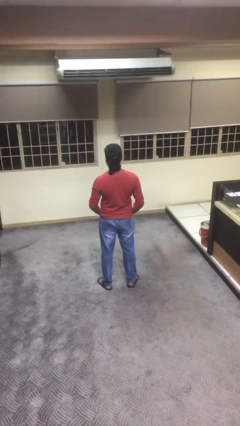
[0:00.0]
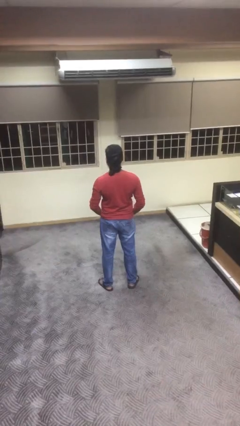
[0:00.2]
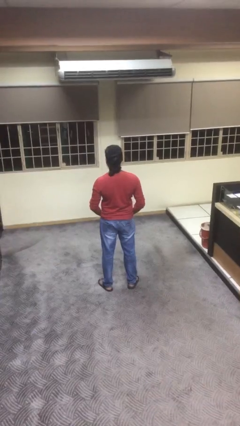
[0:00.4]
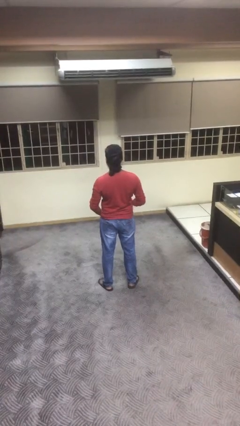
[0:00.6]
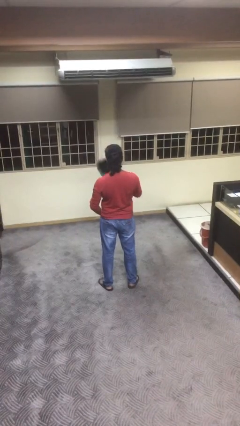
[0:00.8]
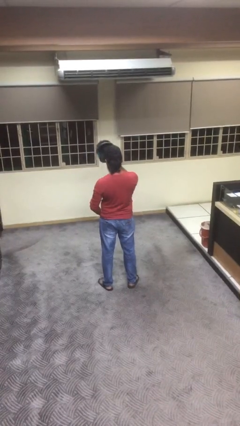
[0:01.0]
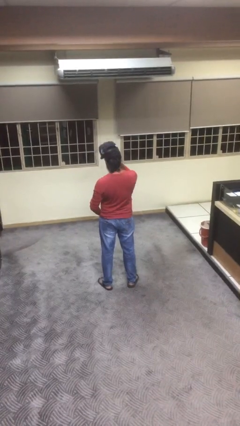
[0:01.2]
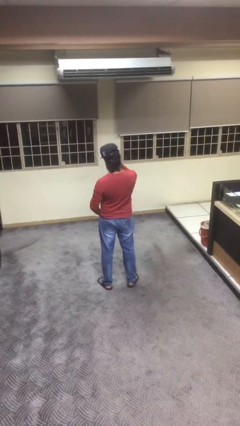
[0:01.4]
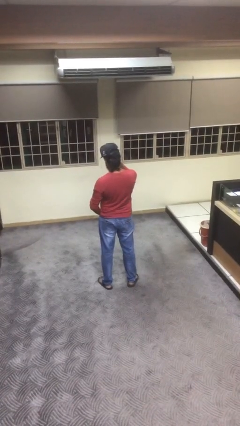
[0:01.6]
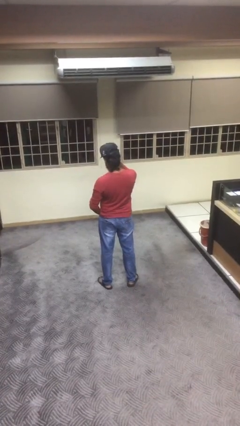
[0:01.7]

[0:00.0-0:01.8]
person puts on hat

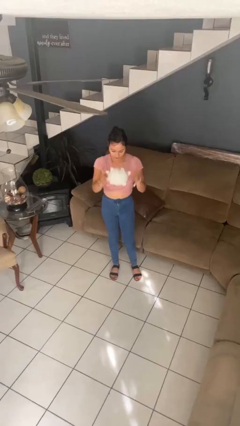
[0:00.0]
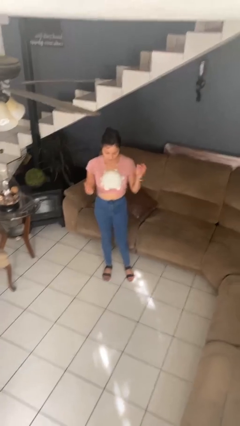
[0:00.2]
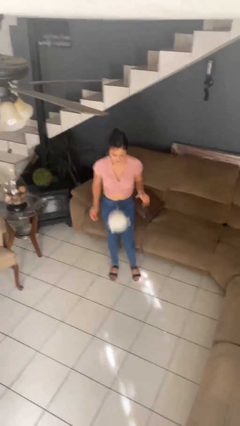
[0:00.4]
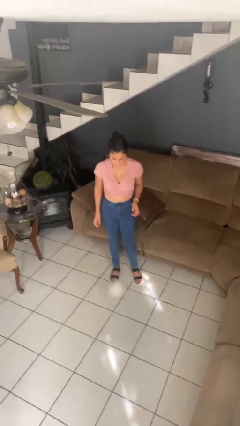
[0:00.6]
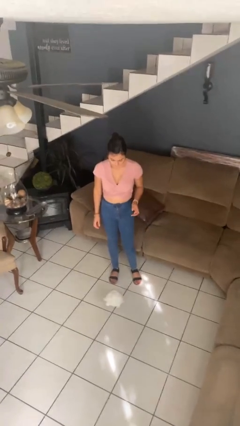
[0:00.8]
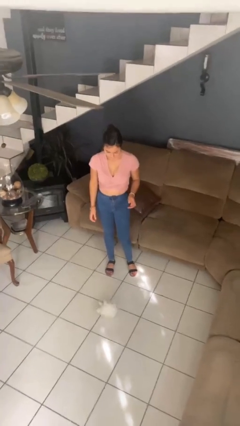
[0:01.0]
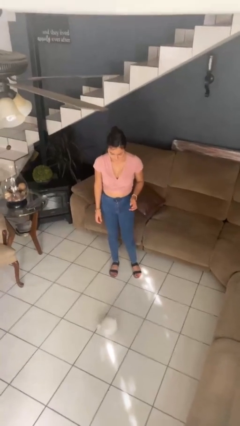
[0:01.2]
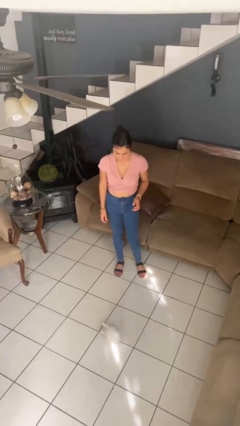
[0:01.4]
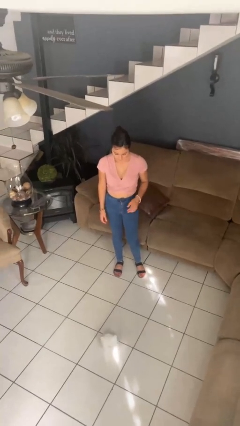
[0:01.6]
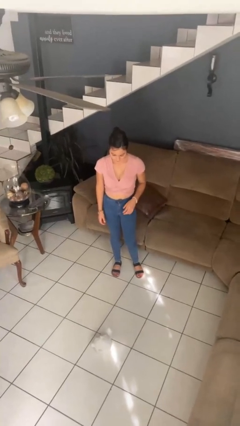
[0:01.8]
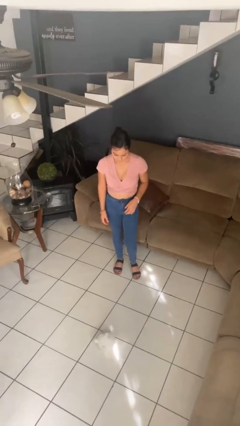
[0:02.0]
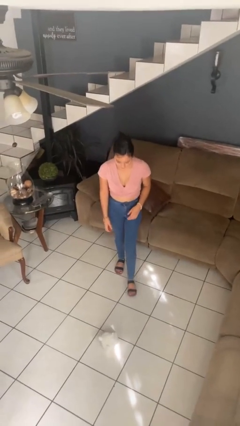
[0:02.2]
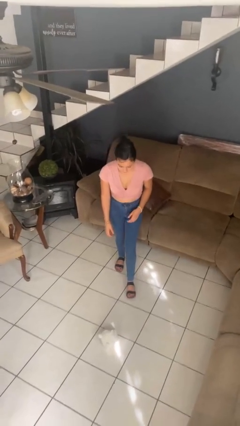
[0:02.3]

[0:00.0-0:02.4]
person throws object into air

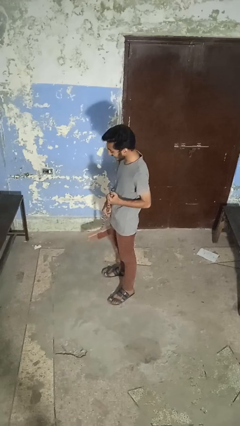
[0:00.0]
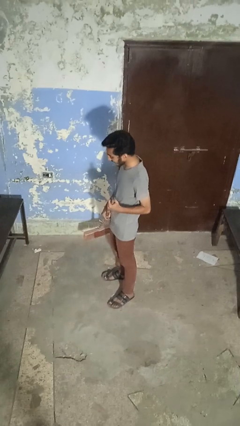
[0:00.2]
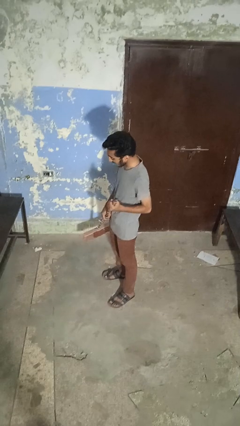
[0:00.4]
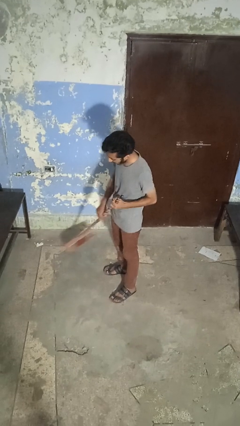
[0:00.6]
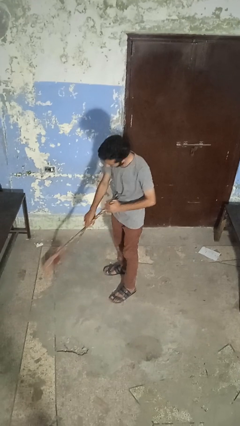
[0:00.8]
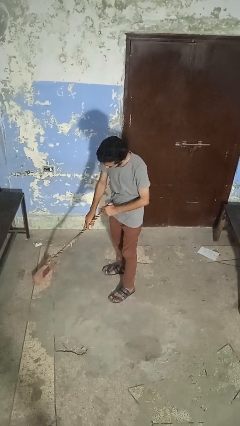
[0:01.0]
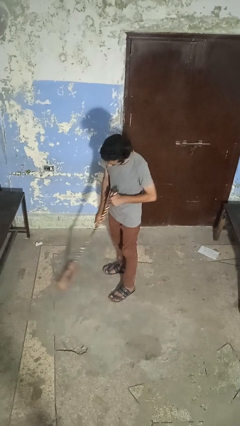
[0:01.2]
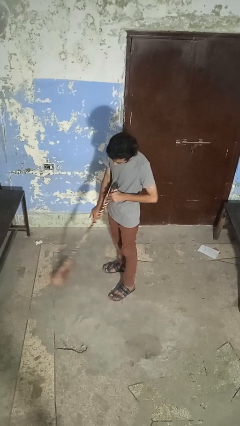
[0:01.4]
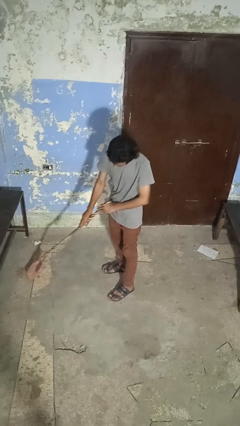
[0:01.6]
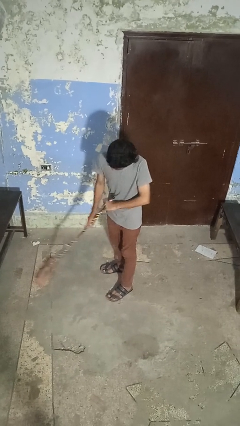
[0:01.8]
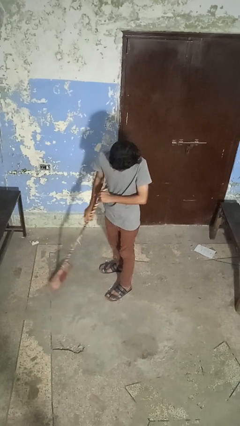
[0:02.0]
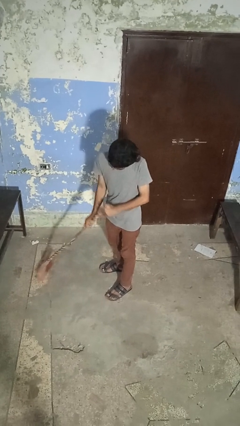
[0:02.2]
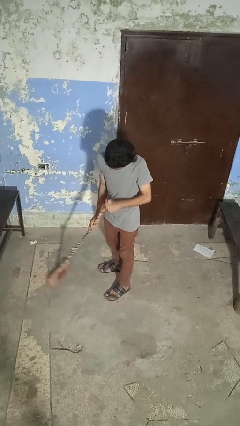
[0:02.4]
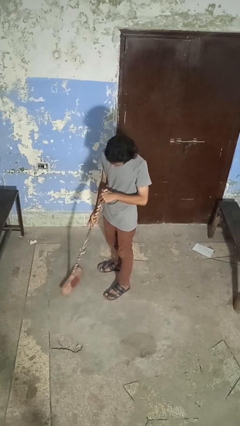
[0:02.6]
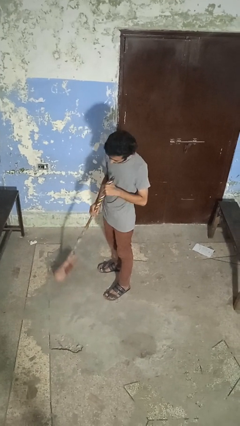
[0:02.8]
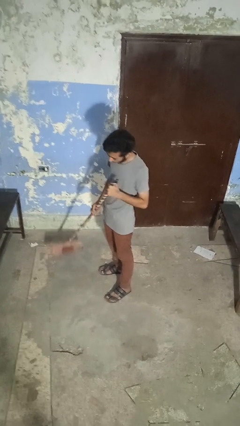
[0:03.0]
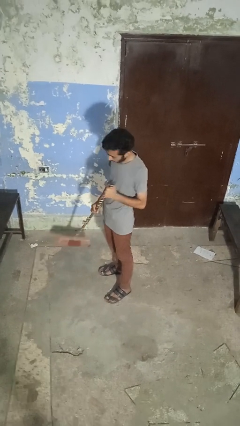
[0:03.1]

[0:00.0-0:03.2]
person sweeps floor

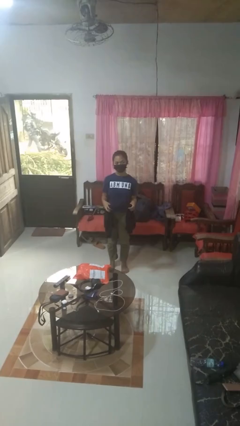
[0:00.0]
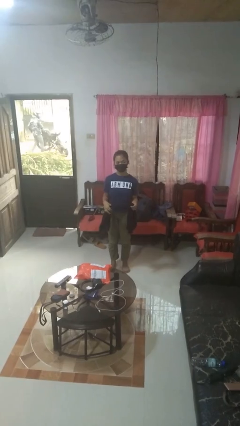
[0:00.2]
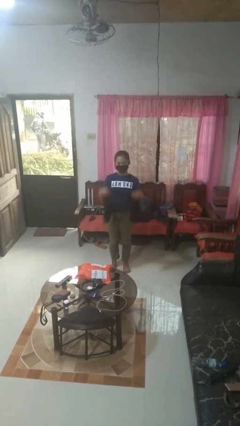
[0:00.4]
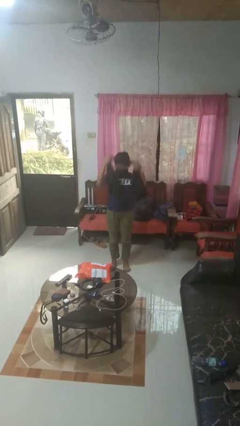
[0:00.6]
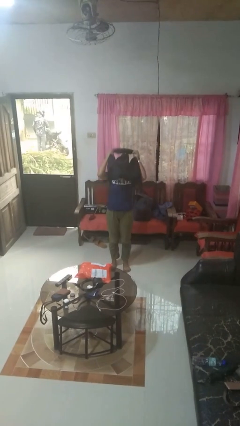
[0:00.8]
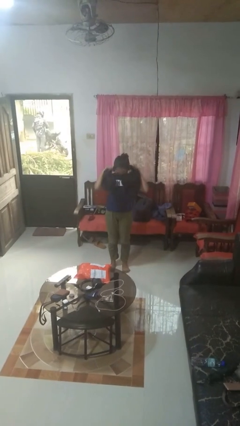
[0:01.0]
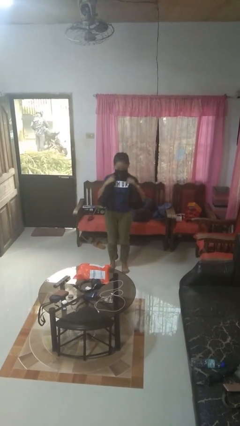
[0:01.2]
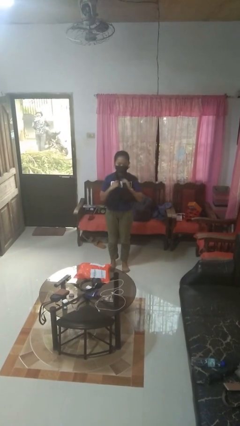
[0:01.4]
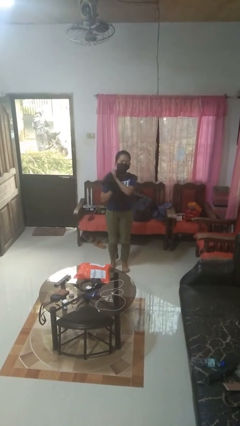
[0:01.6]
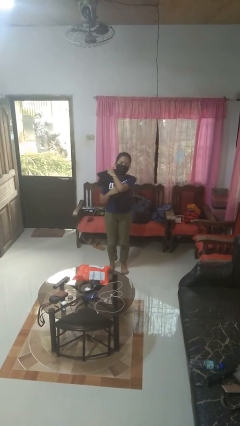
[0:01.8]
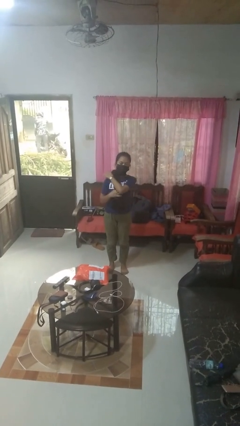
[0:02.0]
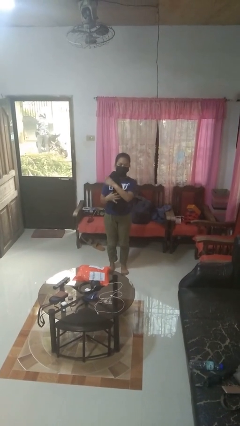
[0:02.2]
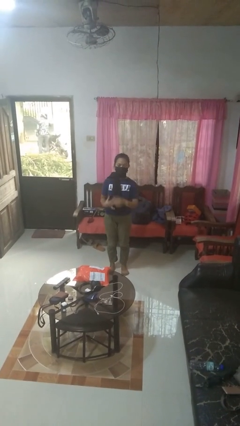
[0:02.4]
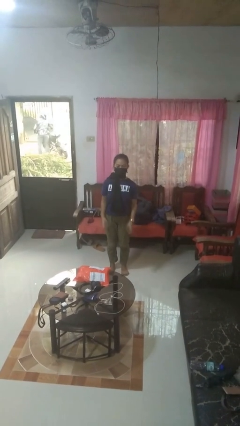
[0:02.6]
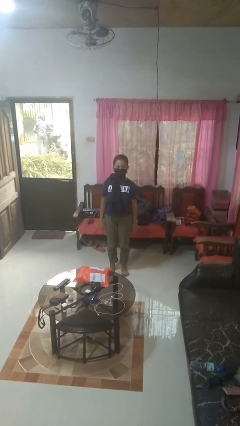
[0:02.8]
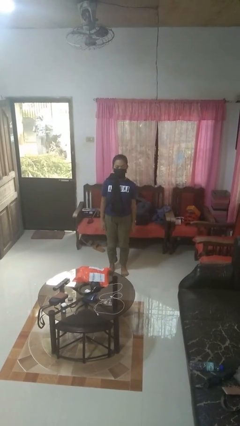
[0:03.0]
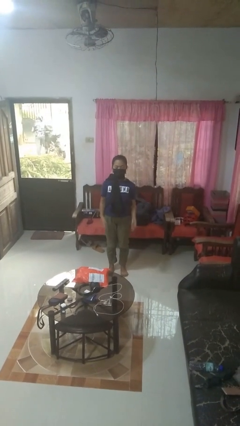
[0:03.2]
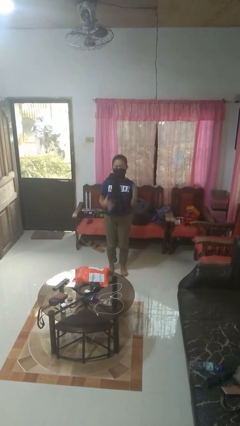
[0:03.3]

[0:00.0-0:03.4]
person puts on scarf

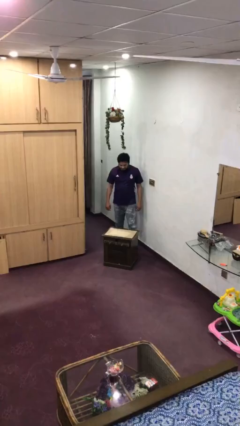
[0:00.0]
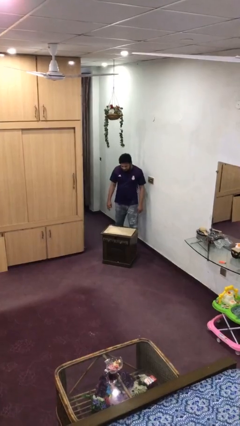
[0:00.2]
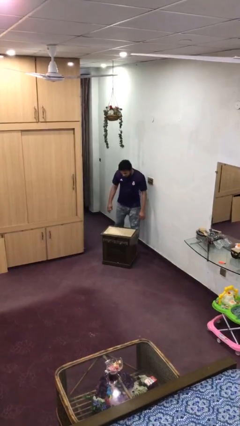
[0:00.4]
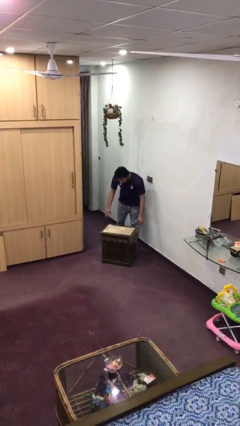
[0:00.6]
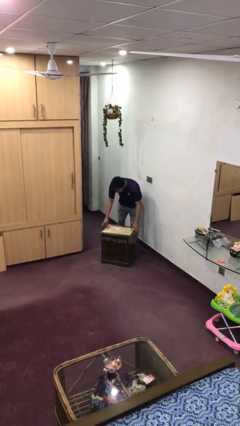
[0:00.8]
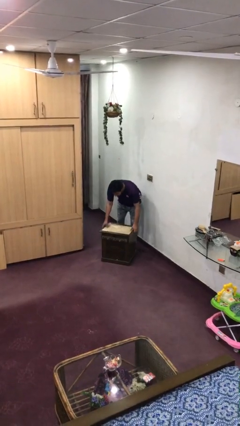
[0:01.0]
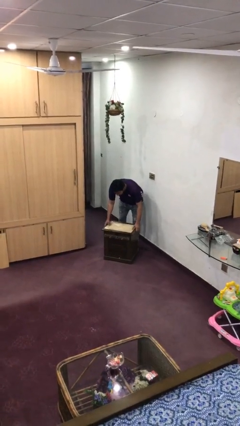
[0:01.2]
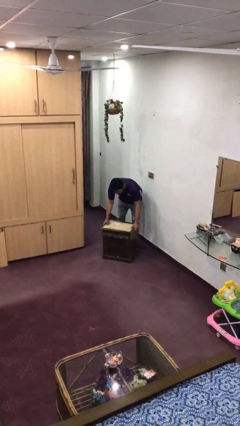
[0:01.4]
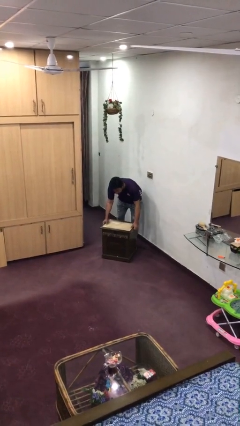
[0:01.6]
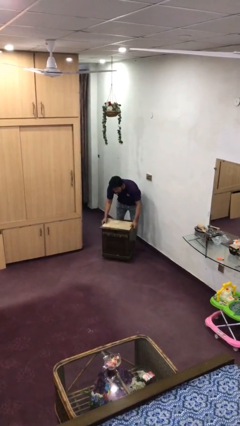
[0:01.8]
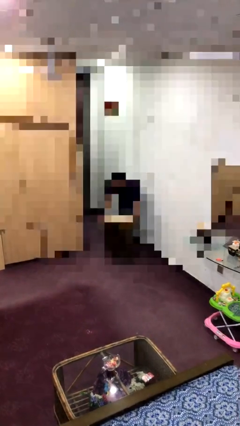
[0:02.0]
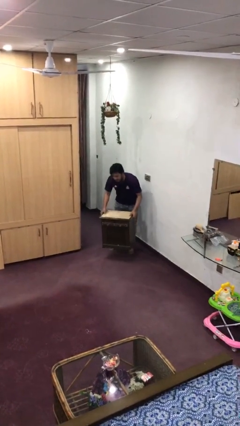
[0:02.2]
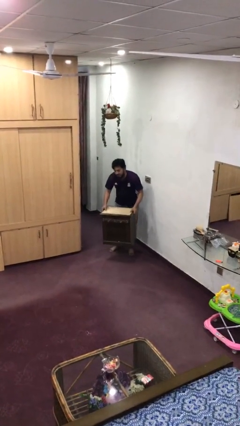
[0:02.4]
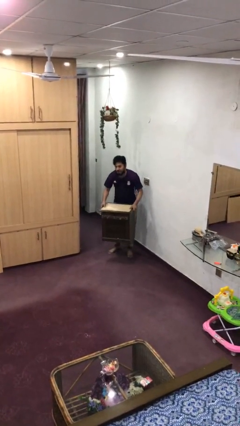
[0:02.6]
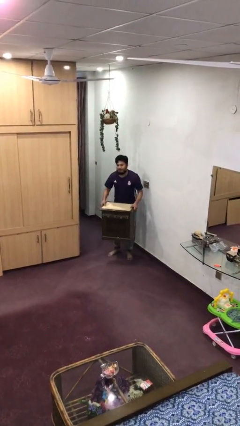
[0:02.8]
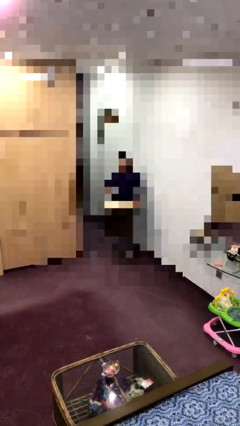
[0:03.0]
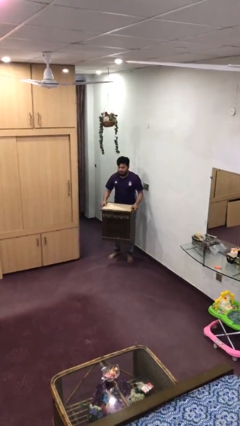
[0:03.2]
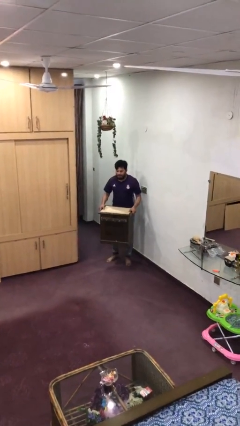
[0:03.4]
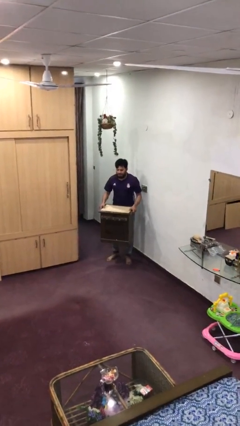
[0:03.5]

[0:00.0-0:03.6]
person picks up object from floor

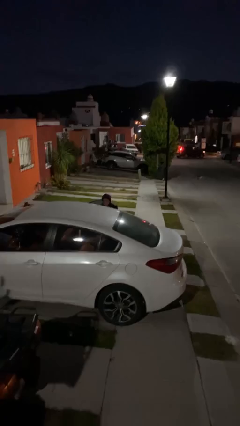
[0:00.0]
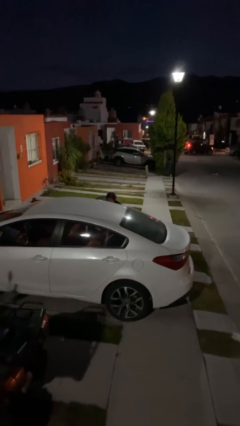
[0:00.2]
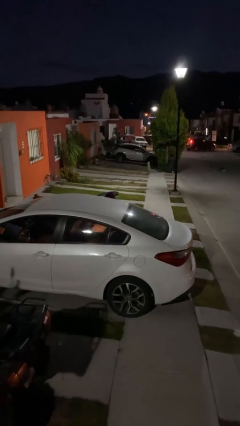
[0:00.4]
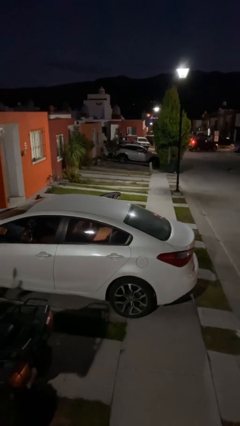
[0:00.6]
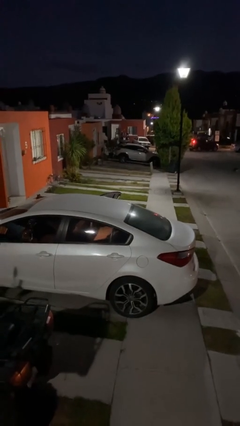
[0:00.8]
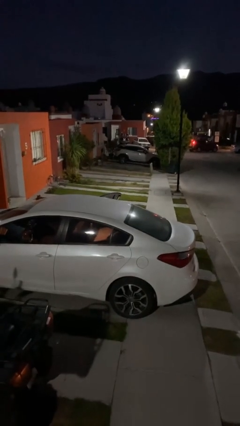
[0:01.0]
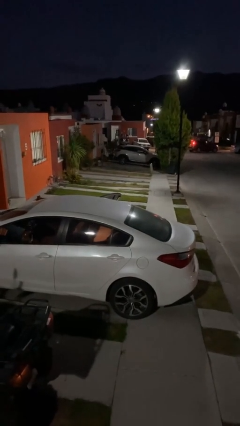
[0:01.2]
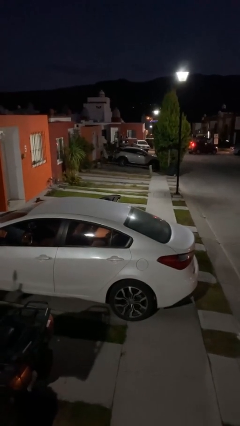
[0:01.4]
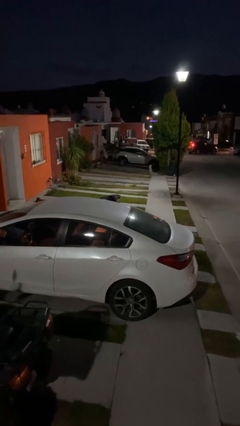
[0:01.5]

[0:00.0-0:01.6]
person loads car

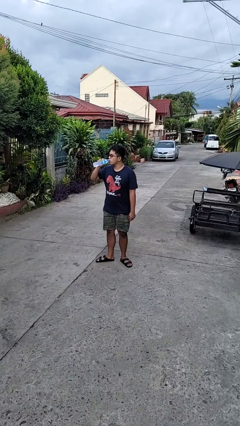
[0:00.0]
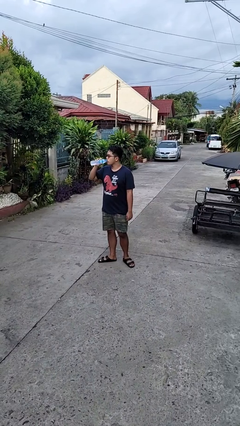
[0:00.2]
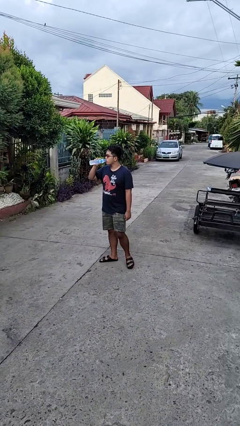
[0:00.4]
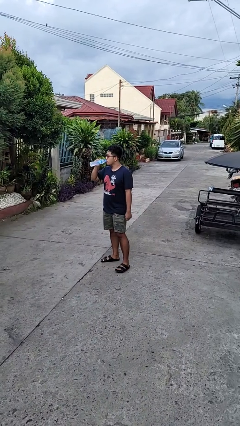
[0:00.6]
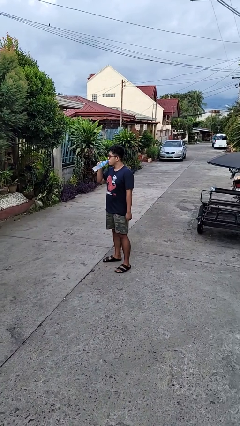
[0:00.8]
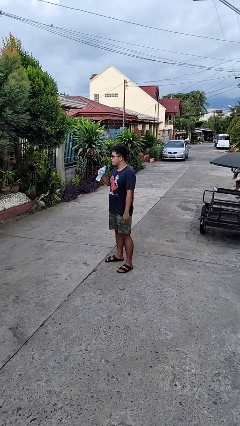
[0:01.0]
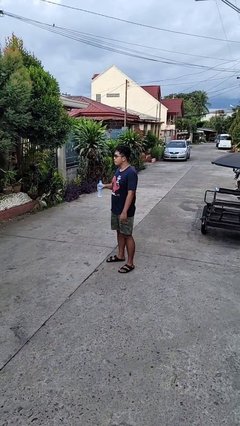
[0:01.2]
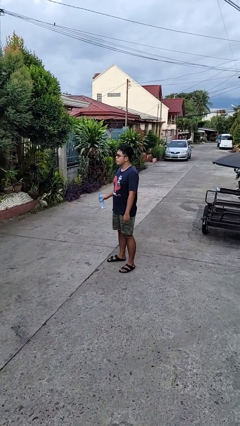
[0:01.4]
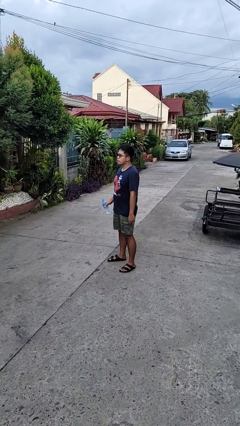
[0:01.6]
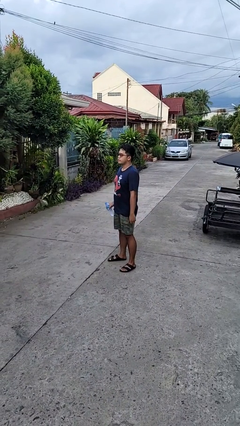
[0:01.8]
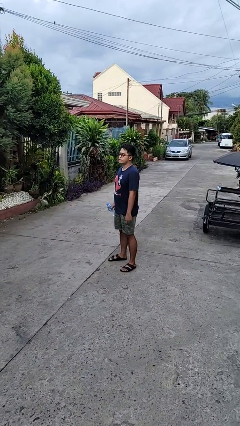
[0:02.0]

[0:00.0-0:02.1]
person drinks from bottle
